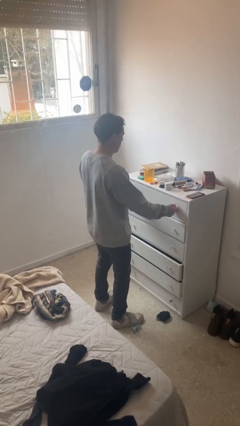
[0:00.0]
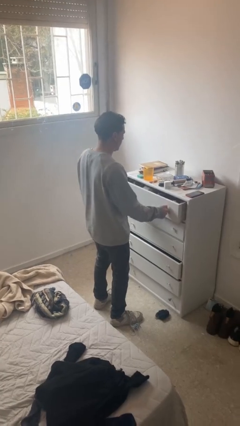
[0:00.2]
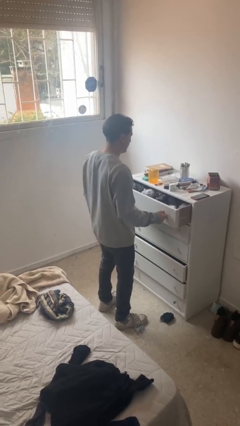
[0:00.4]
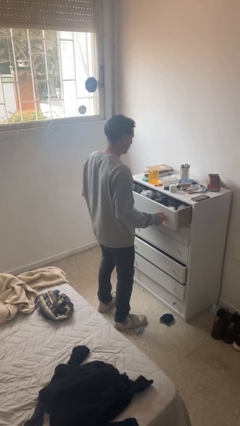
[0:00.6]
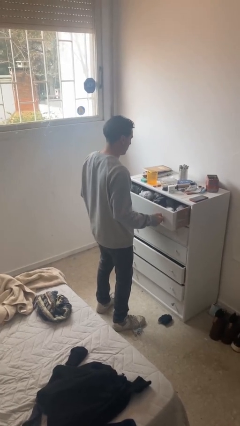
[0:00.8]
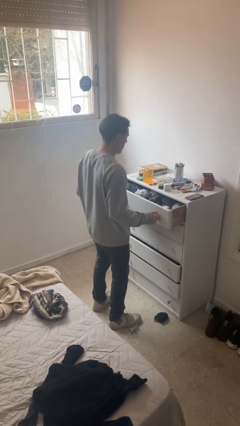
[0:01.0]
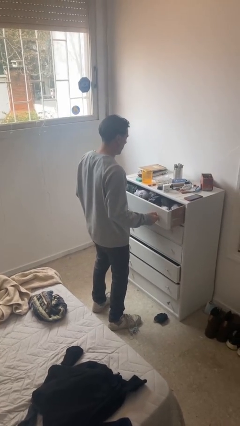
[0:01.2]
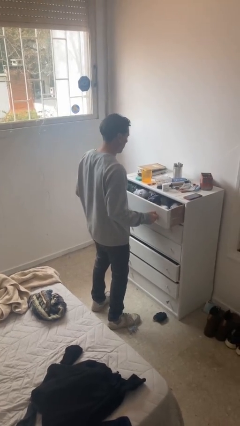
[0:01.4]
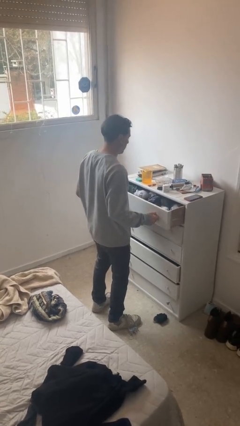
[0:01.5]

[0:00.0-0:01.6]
person opens dresser drawer

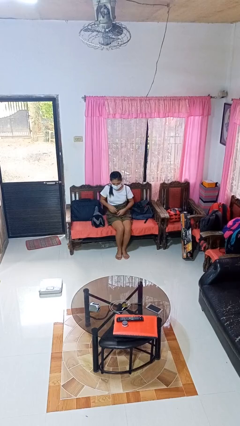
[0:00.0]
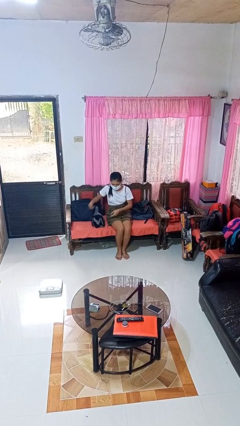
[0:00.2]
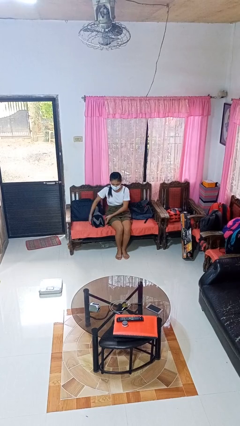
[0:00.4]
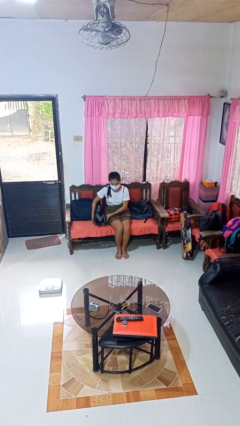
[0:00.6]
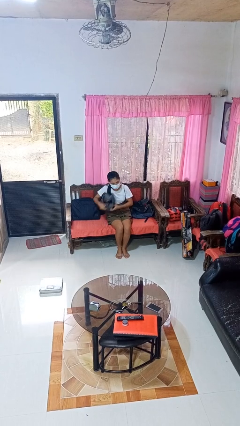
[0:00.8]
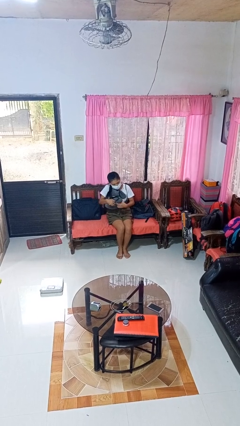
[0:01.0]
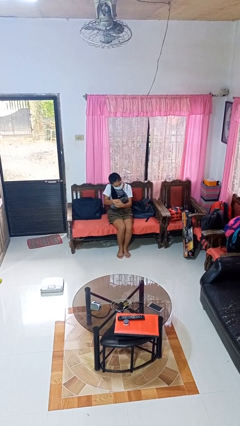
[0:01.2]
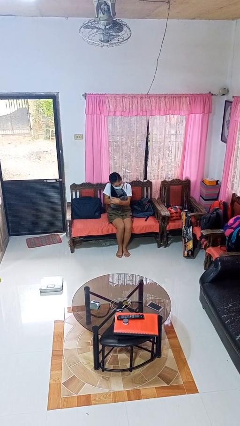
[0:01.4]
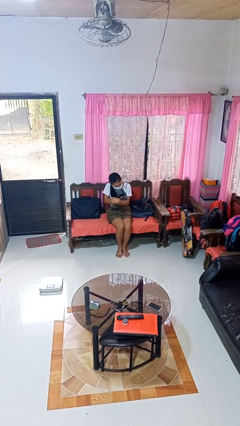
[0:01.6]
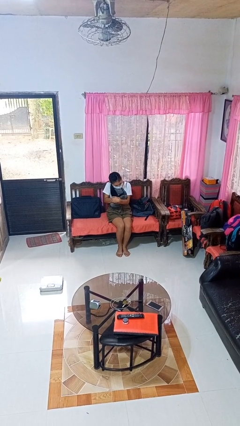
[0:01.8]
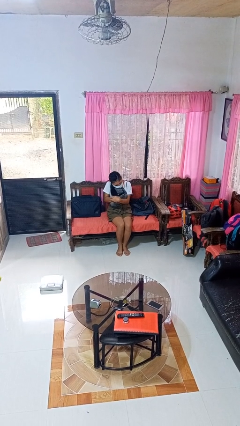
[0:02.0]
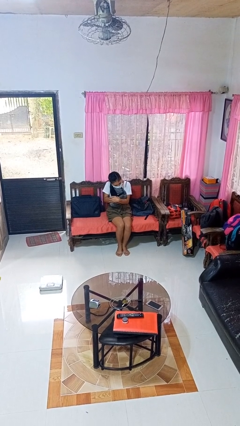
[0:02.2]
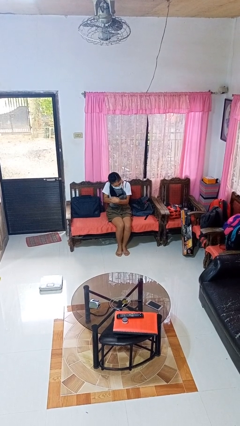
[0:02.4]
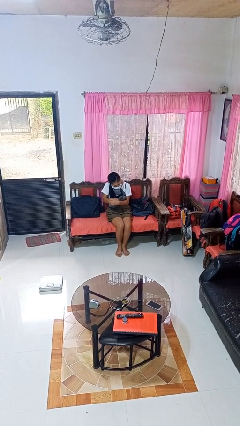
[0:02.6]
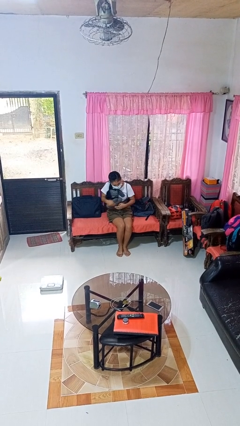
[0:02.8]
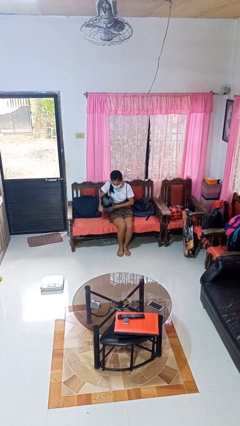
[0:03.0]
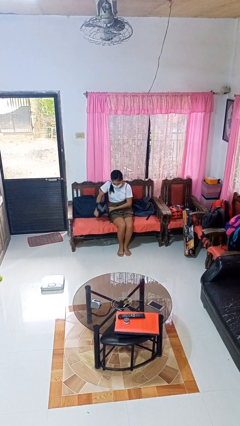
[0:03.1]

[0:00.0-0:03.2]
person hugs stuffed animal

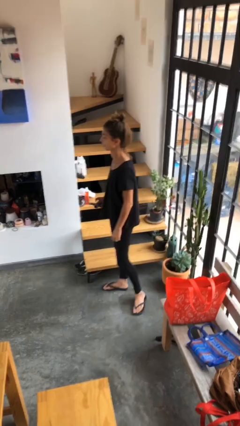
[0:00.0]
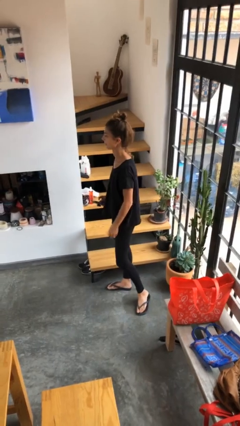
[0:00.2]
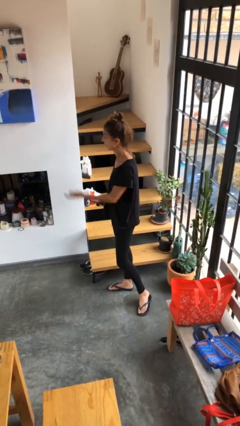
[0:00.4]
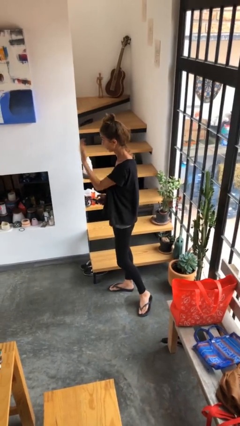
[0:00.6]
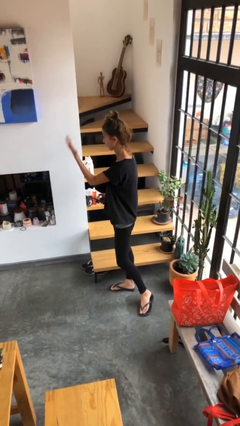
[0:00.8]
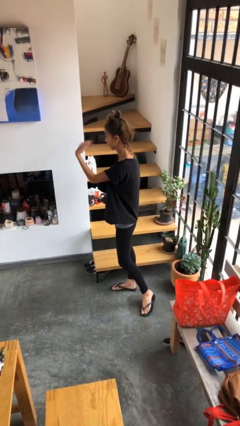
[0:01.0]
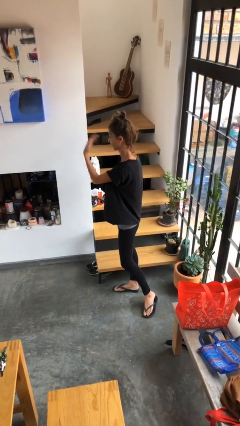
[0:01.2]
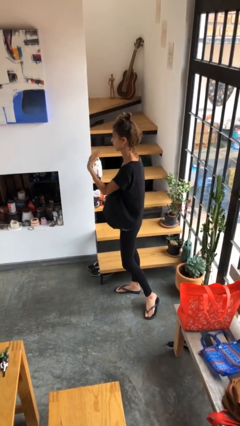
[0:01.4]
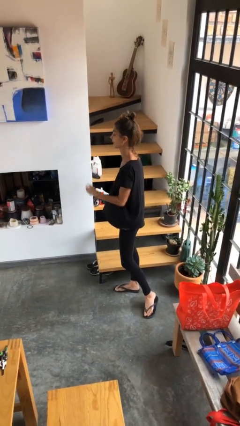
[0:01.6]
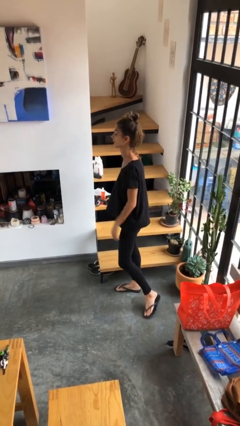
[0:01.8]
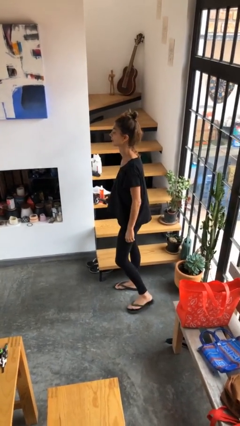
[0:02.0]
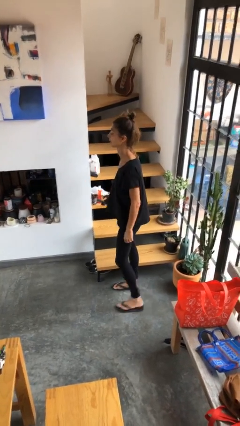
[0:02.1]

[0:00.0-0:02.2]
person gestures come here

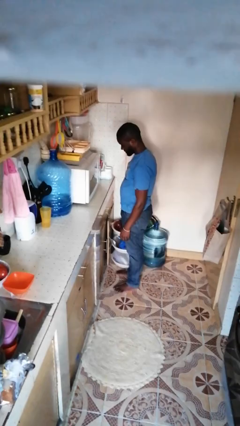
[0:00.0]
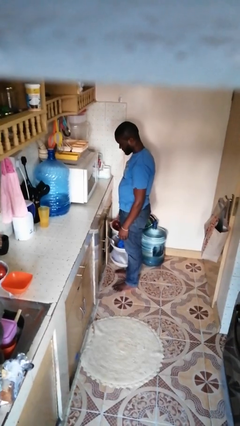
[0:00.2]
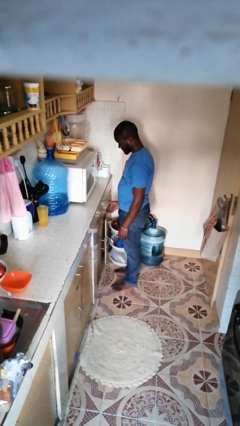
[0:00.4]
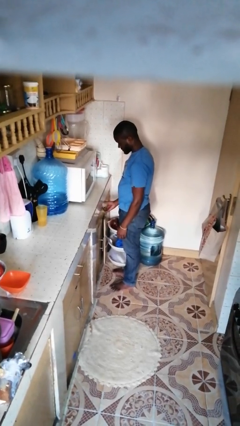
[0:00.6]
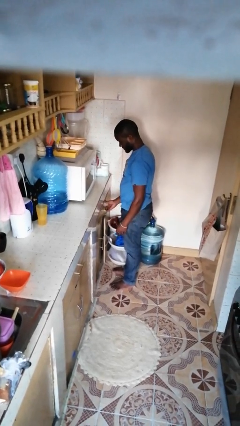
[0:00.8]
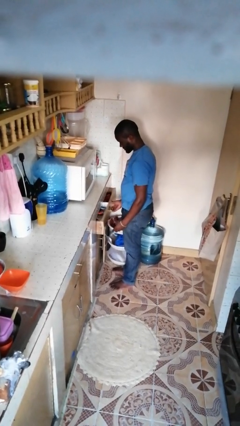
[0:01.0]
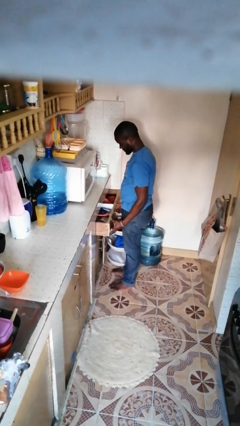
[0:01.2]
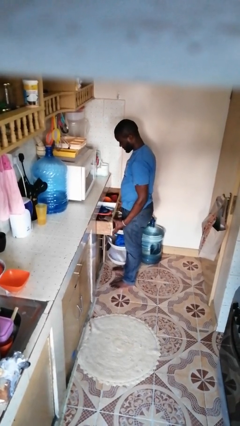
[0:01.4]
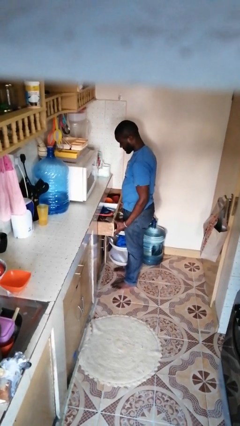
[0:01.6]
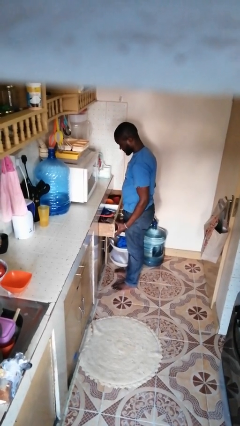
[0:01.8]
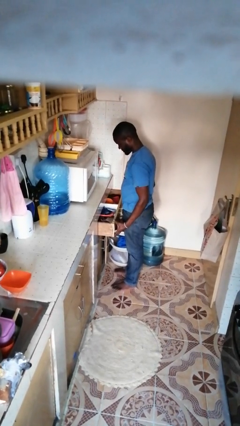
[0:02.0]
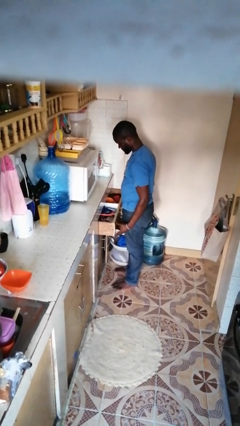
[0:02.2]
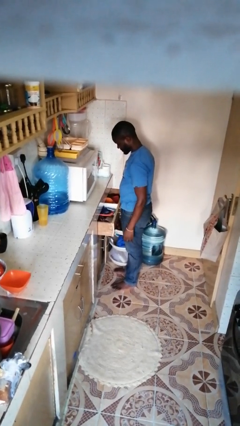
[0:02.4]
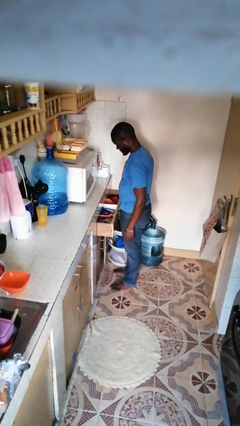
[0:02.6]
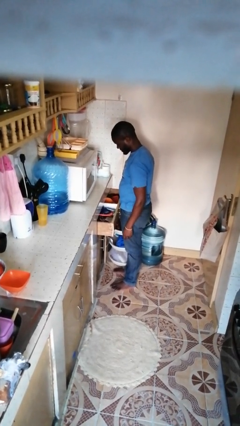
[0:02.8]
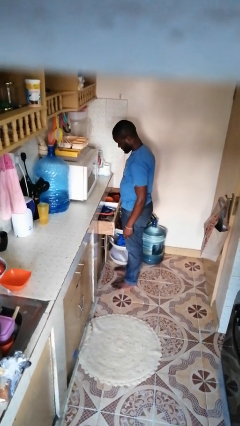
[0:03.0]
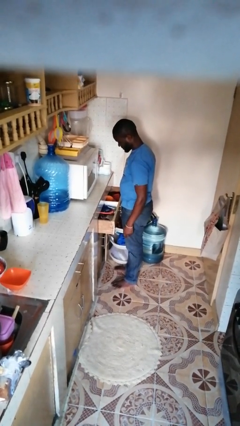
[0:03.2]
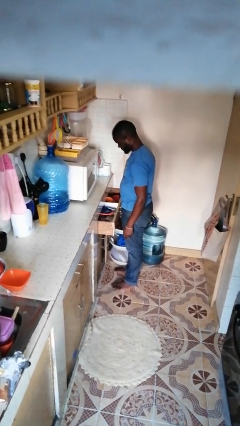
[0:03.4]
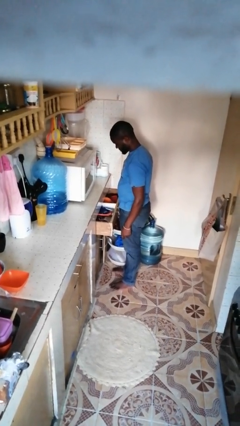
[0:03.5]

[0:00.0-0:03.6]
person opens kitchen drawer

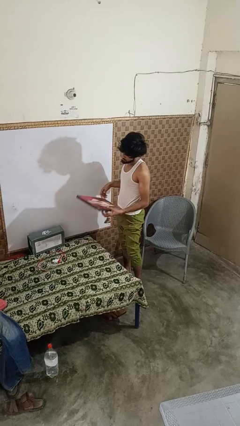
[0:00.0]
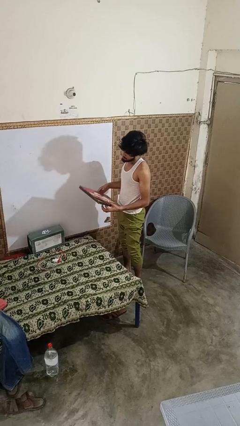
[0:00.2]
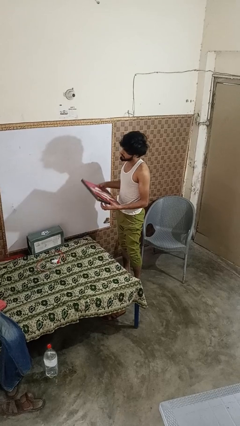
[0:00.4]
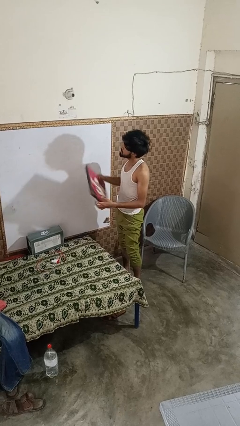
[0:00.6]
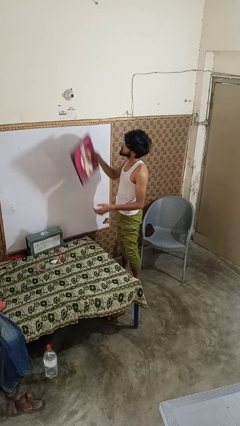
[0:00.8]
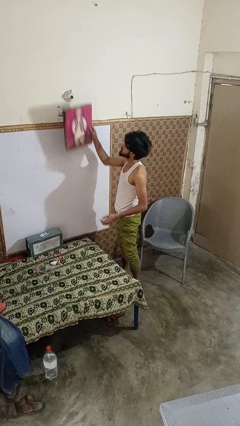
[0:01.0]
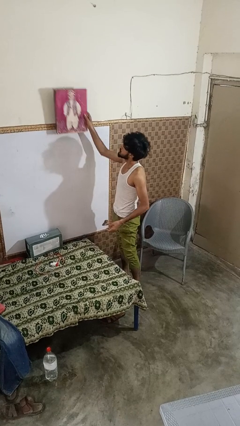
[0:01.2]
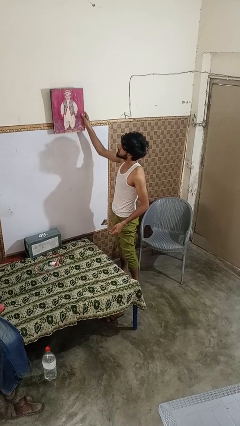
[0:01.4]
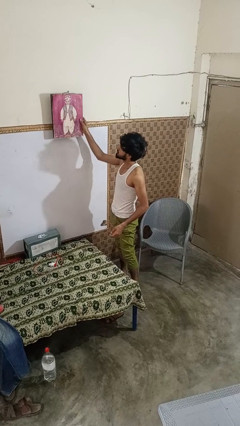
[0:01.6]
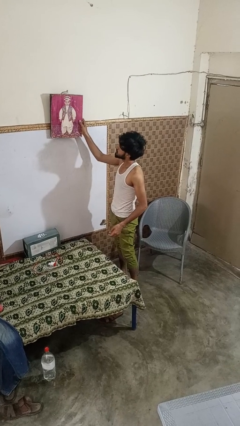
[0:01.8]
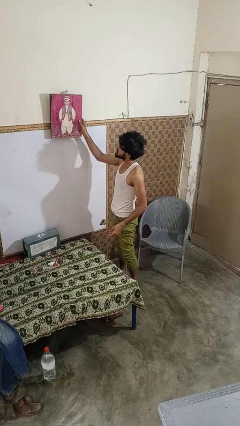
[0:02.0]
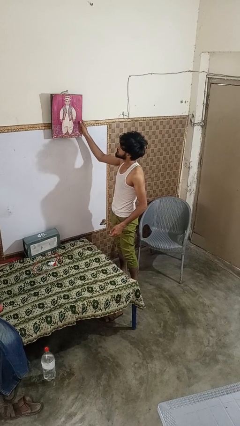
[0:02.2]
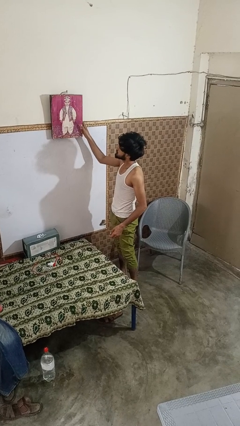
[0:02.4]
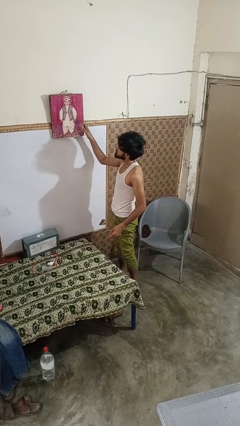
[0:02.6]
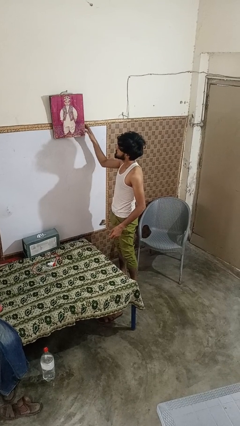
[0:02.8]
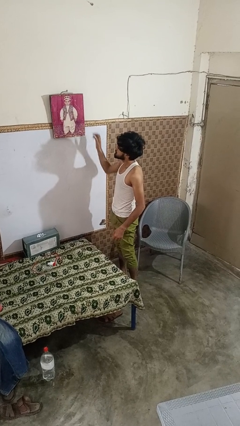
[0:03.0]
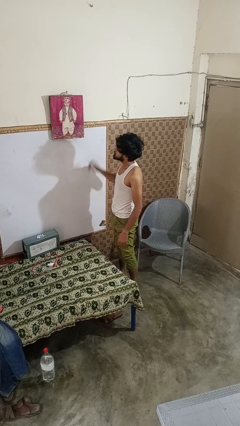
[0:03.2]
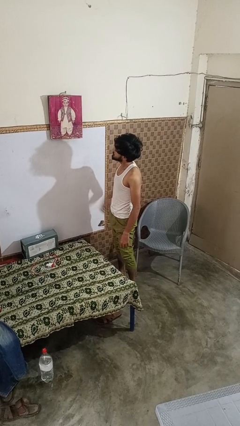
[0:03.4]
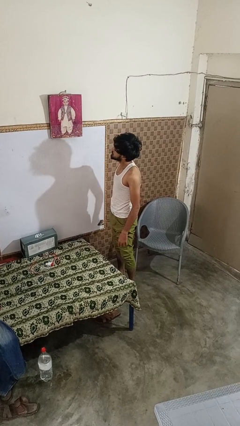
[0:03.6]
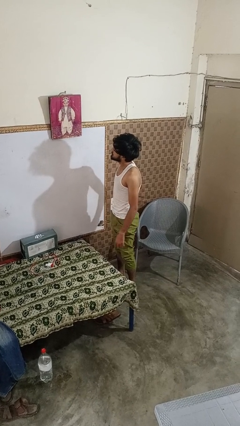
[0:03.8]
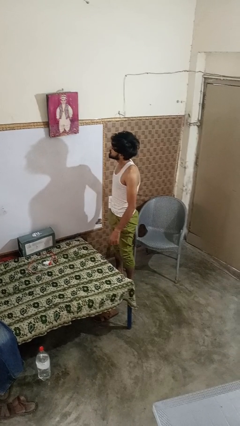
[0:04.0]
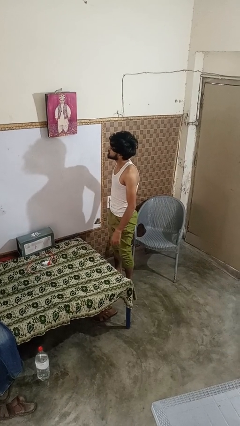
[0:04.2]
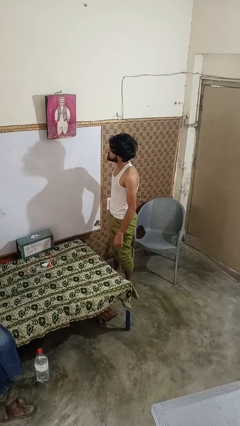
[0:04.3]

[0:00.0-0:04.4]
person puts up picture frame

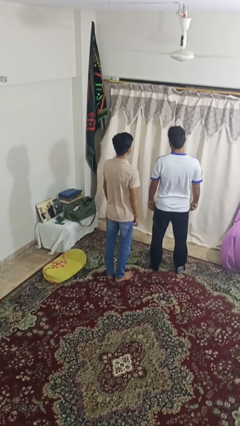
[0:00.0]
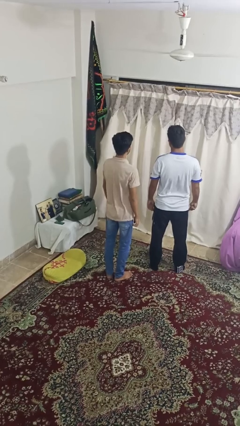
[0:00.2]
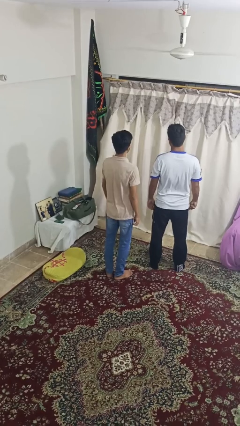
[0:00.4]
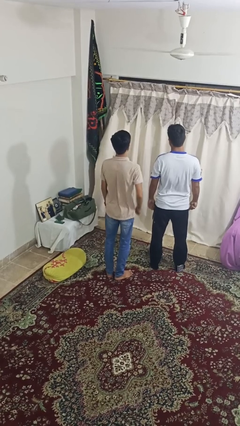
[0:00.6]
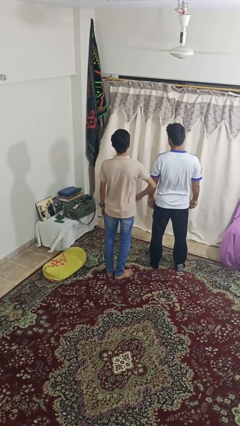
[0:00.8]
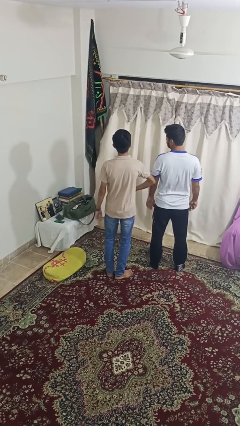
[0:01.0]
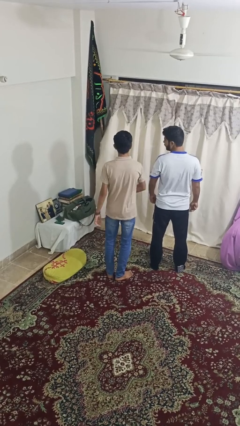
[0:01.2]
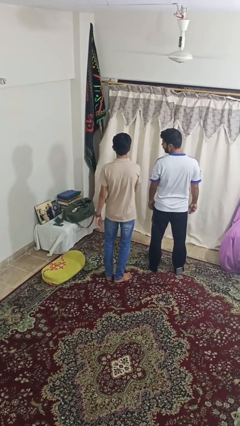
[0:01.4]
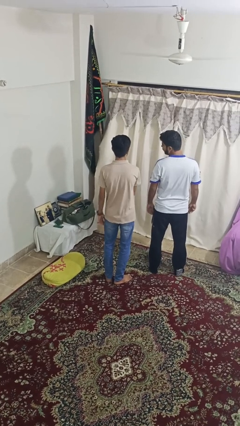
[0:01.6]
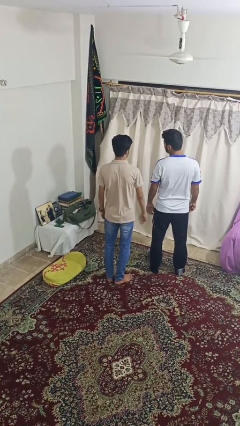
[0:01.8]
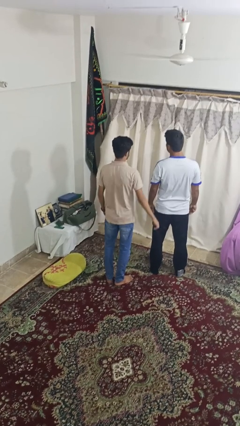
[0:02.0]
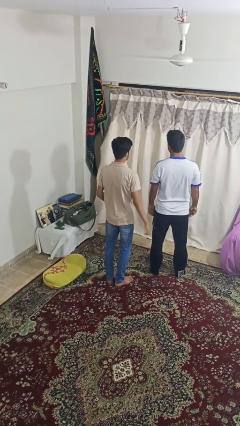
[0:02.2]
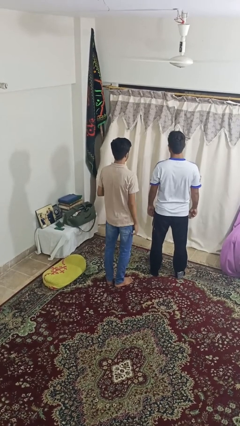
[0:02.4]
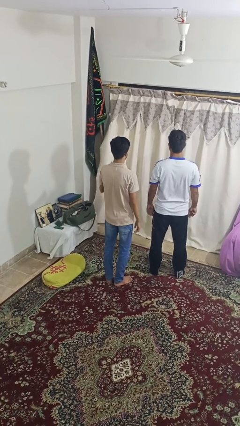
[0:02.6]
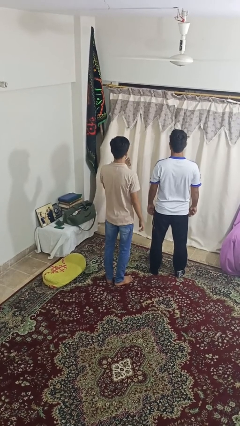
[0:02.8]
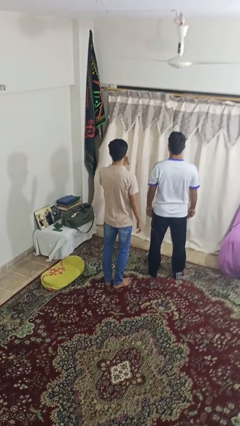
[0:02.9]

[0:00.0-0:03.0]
person nudges person with elbow
